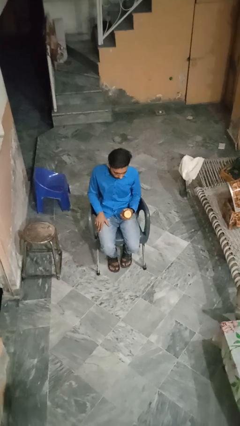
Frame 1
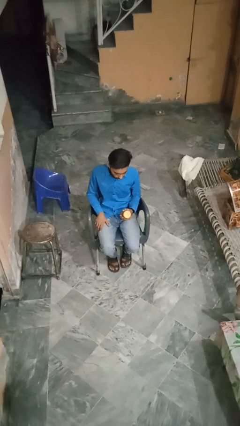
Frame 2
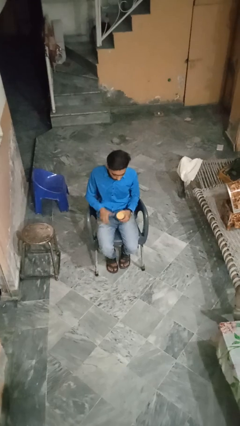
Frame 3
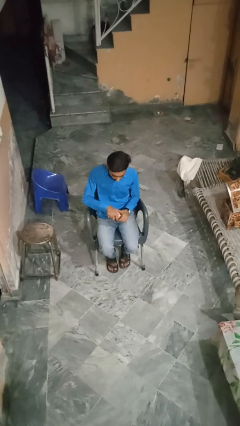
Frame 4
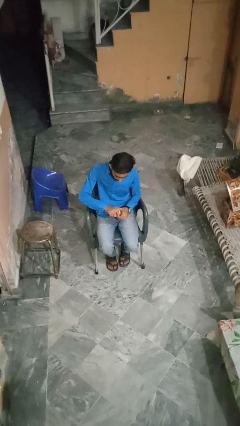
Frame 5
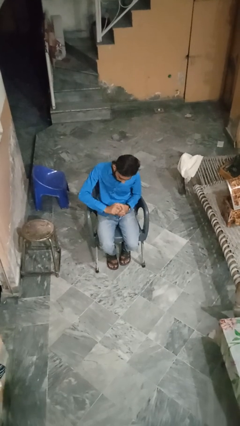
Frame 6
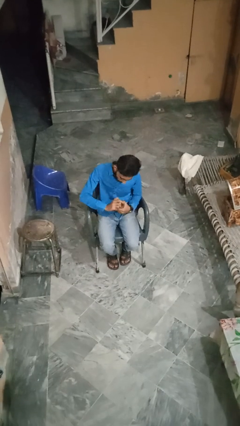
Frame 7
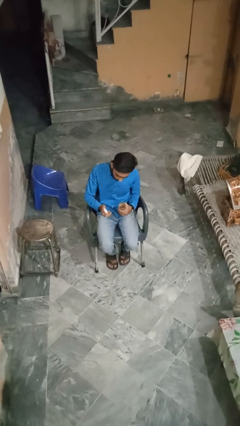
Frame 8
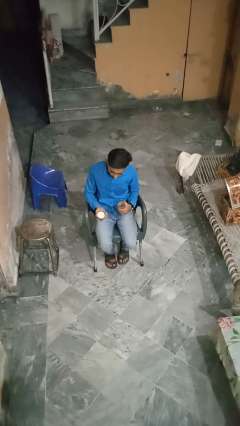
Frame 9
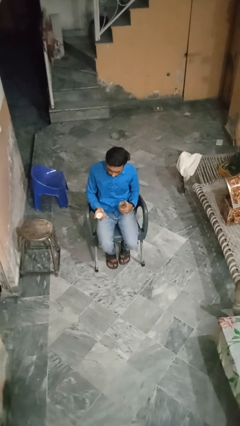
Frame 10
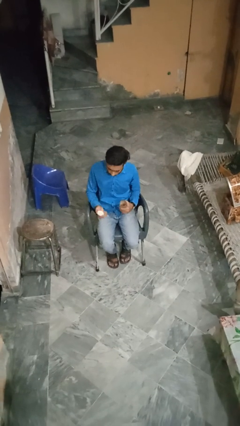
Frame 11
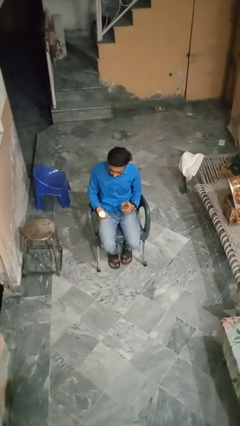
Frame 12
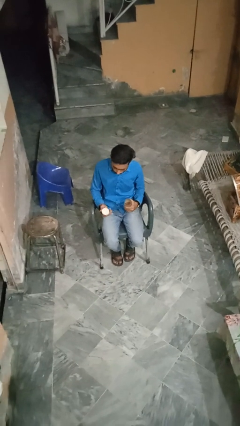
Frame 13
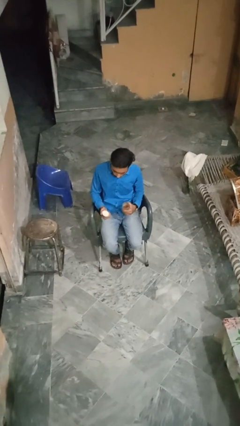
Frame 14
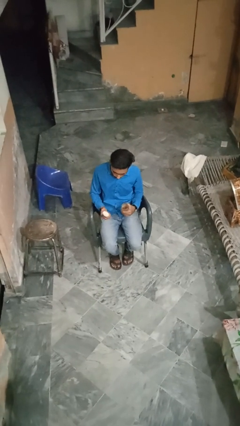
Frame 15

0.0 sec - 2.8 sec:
person opens jar

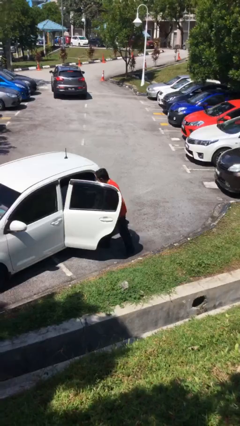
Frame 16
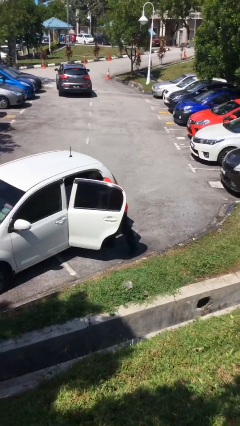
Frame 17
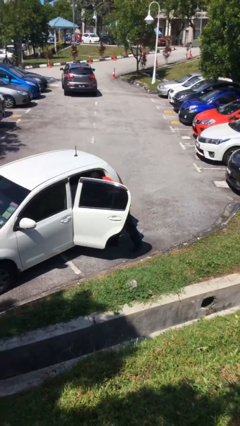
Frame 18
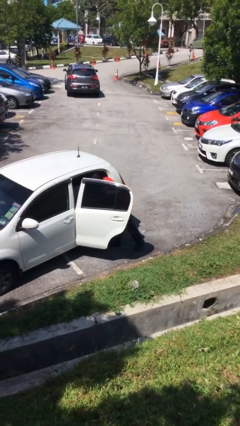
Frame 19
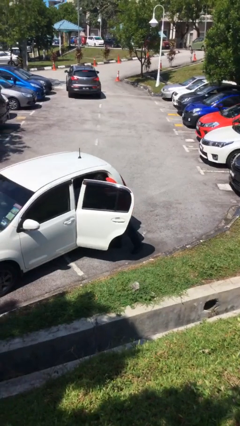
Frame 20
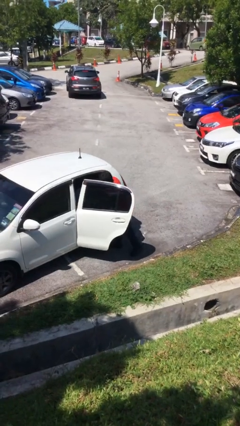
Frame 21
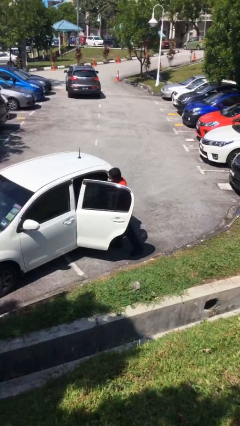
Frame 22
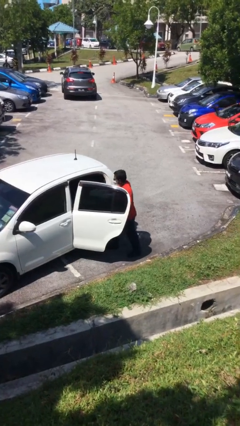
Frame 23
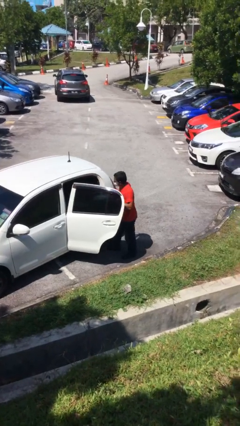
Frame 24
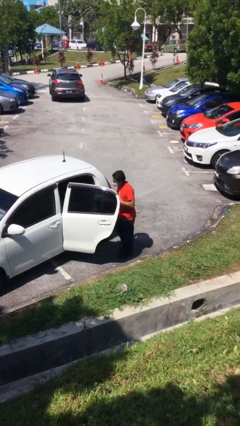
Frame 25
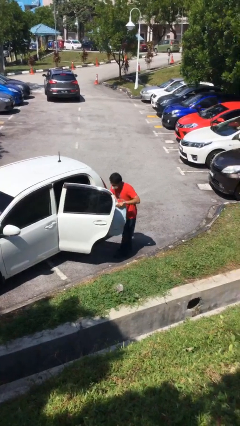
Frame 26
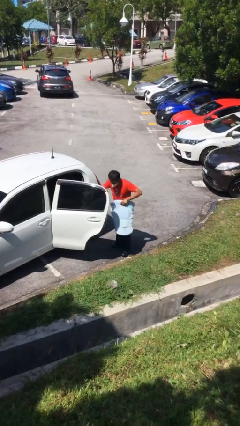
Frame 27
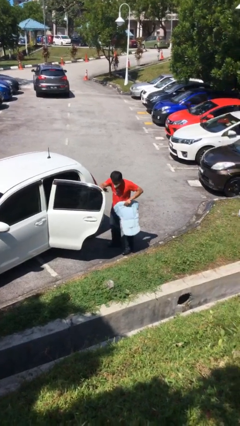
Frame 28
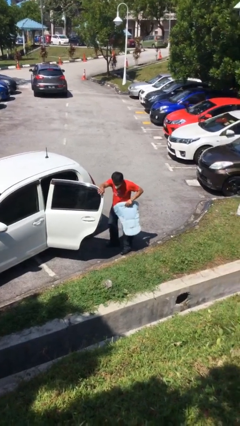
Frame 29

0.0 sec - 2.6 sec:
person unloads car

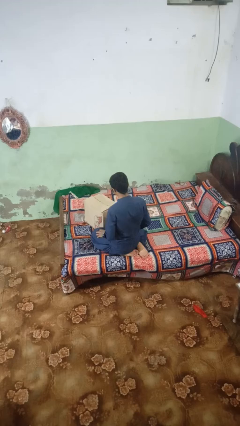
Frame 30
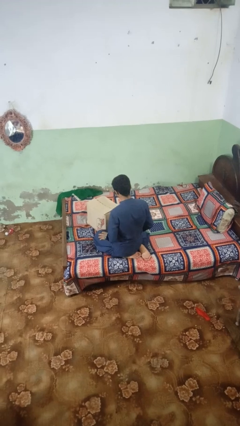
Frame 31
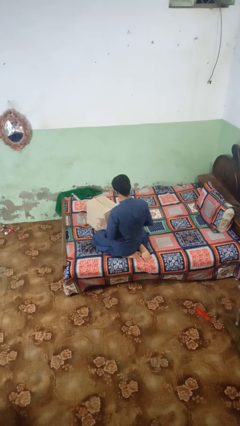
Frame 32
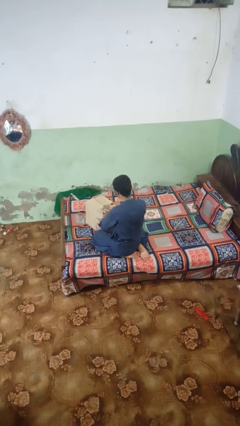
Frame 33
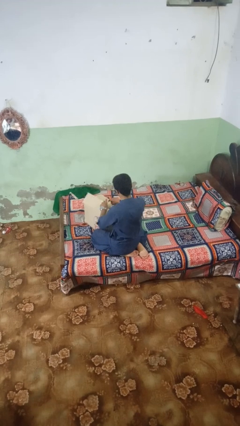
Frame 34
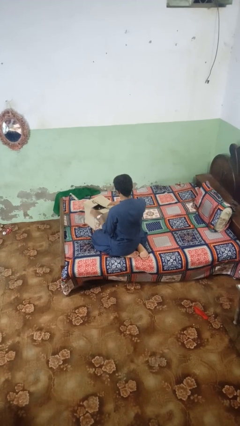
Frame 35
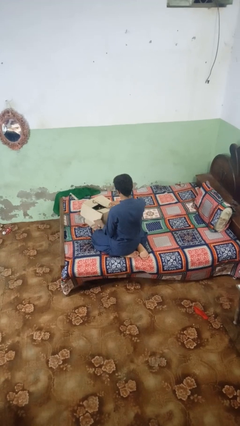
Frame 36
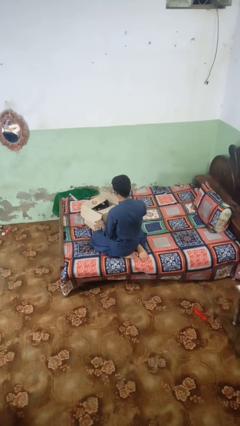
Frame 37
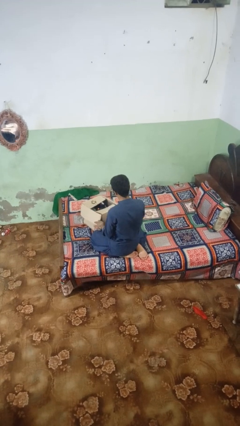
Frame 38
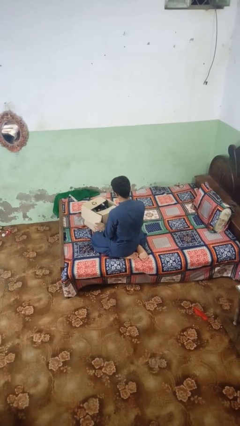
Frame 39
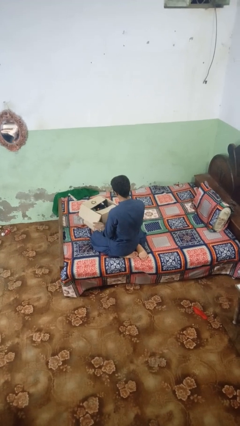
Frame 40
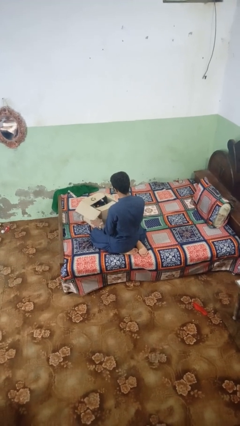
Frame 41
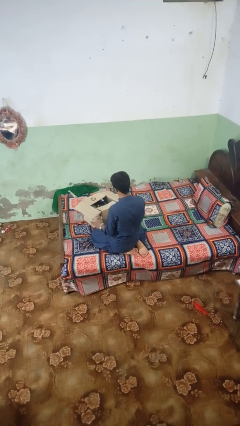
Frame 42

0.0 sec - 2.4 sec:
person opens box

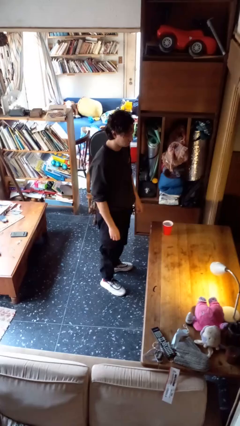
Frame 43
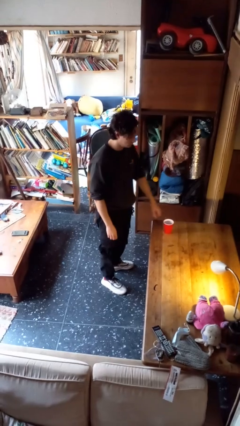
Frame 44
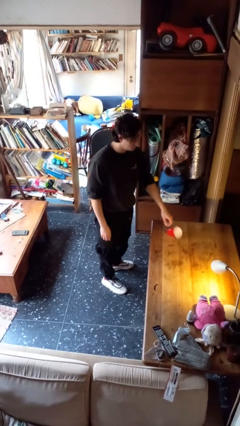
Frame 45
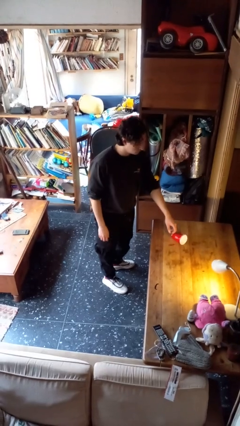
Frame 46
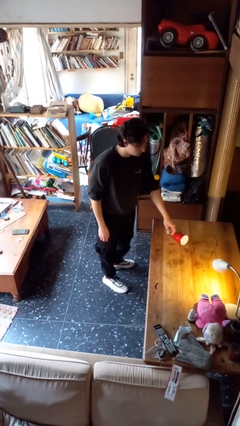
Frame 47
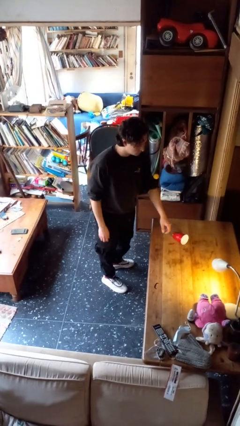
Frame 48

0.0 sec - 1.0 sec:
person knocks over glass

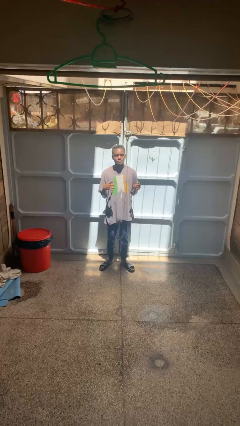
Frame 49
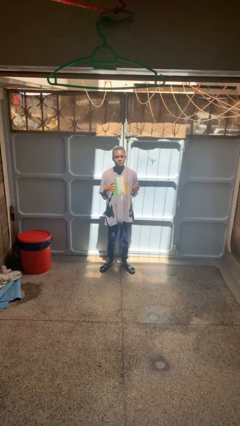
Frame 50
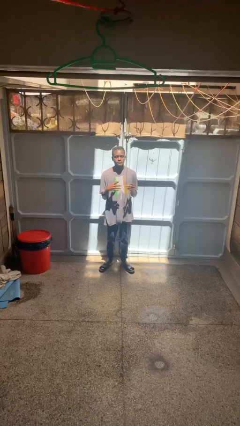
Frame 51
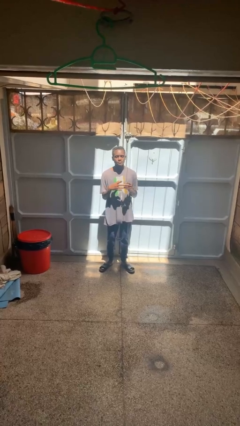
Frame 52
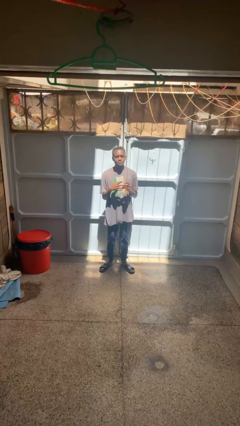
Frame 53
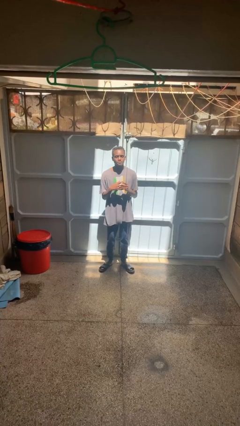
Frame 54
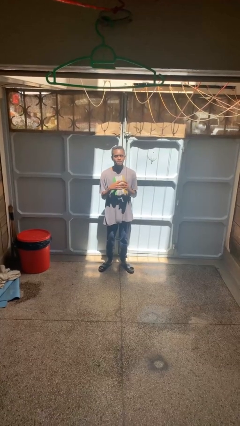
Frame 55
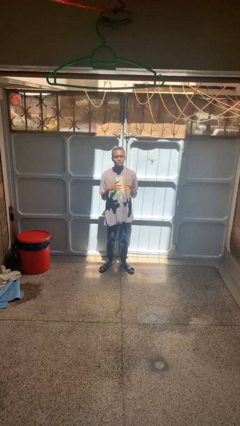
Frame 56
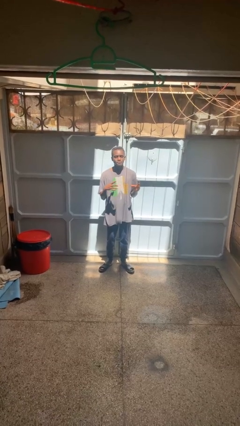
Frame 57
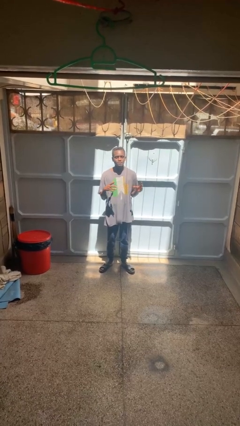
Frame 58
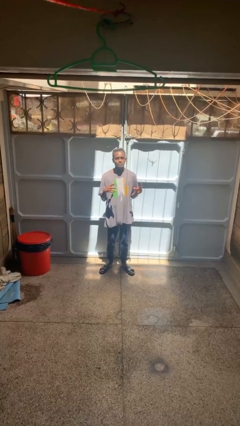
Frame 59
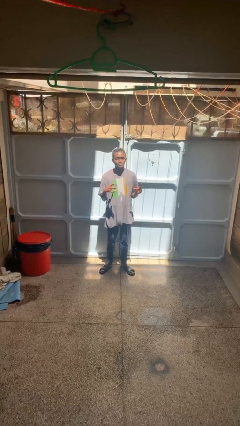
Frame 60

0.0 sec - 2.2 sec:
person puts on ring

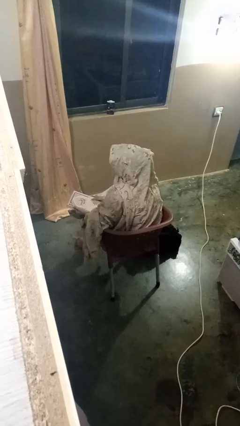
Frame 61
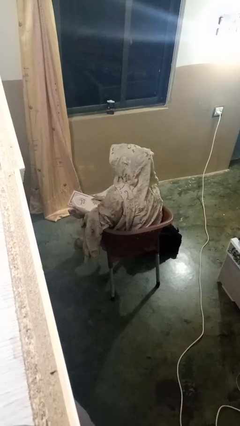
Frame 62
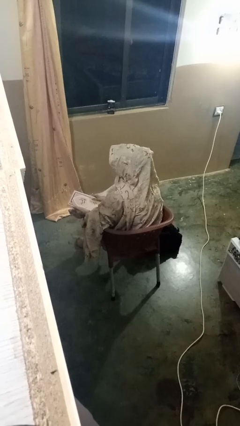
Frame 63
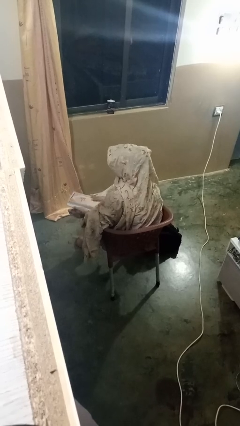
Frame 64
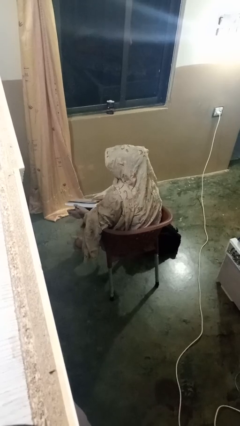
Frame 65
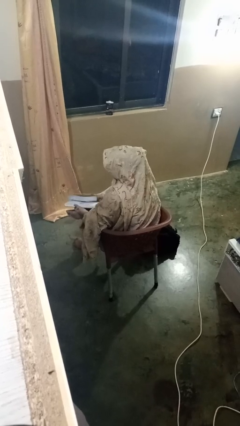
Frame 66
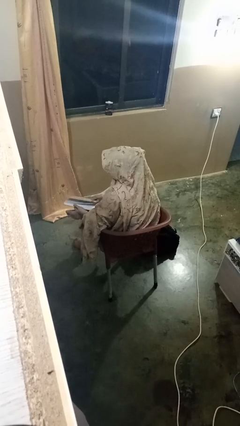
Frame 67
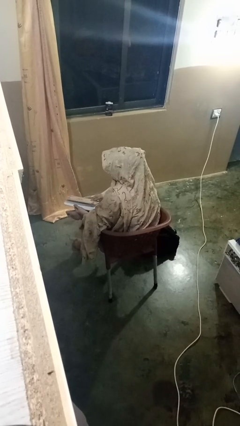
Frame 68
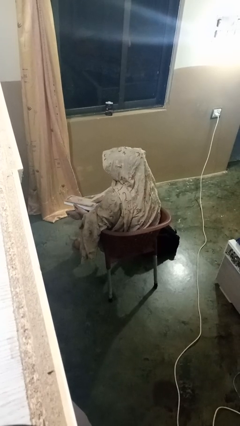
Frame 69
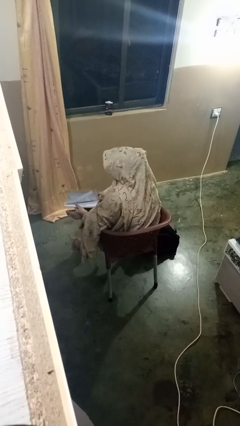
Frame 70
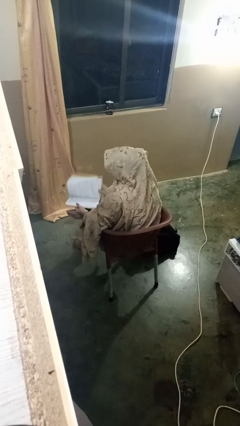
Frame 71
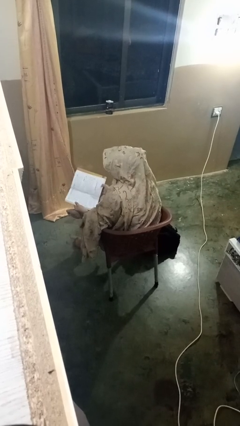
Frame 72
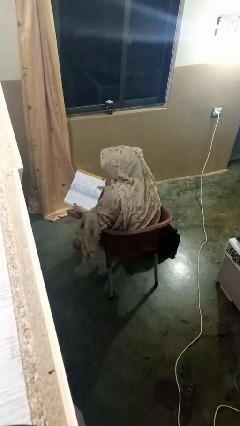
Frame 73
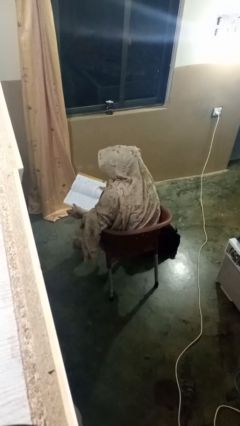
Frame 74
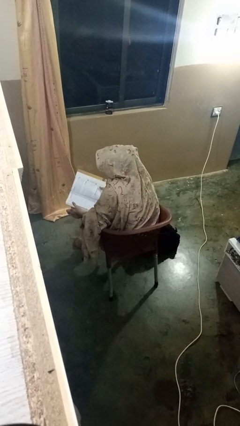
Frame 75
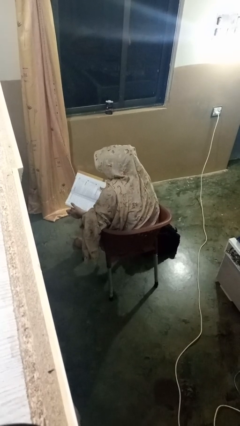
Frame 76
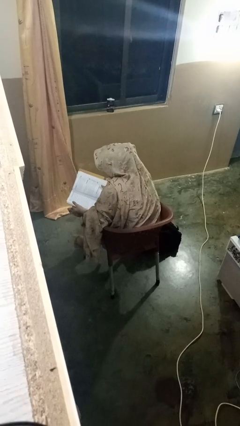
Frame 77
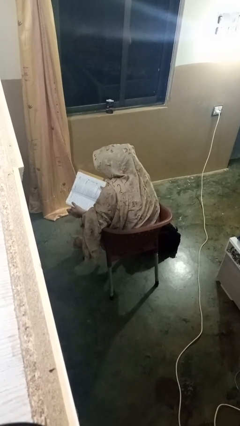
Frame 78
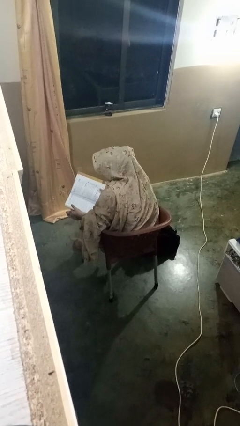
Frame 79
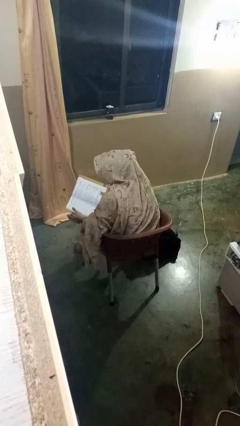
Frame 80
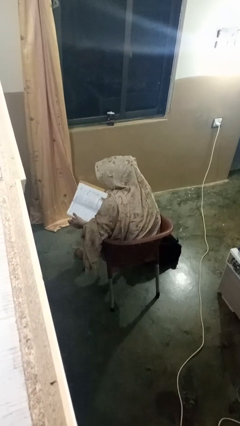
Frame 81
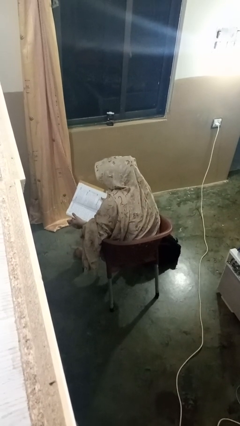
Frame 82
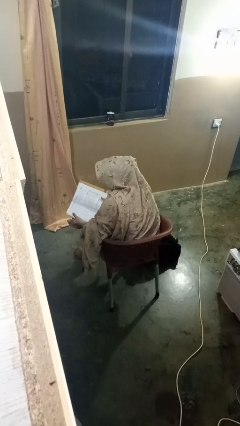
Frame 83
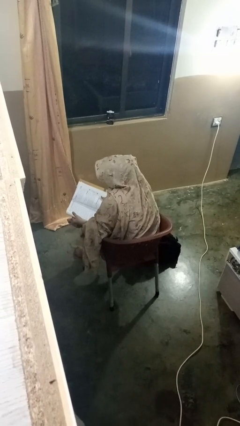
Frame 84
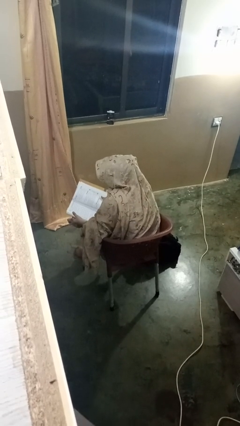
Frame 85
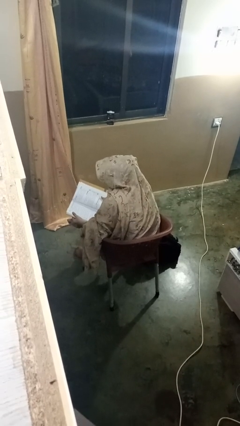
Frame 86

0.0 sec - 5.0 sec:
person reads book

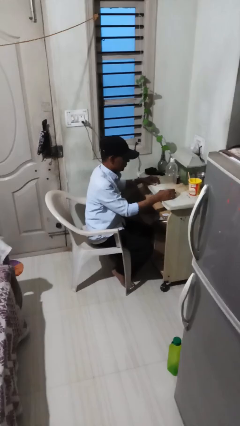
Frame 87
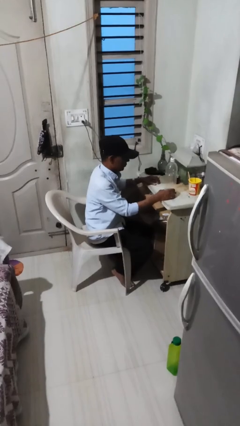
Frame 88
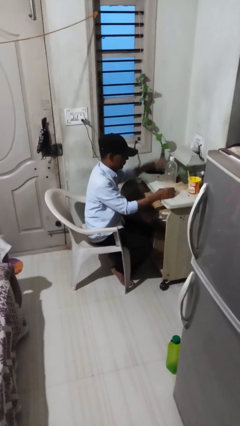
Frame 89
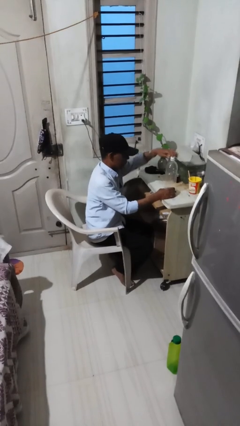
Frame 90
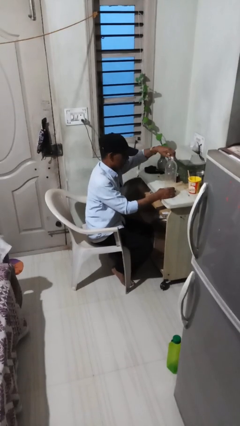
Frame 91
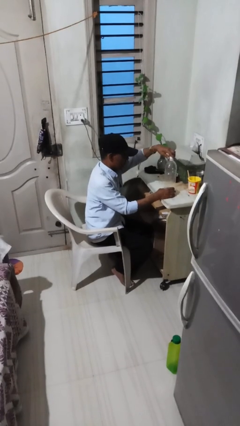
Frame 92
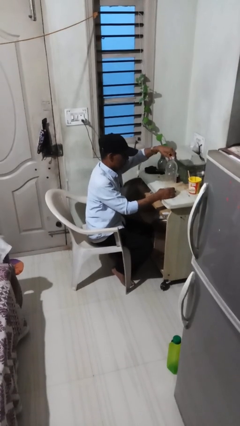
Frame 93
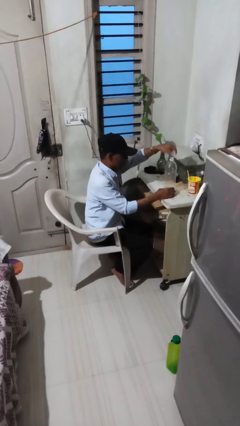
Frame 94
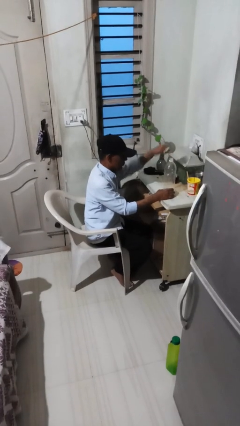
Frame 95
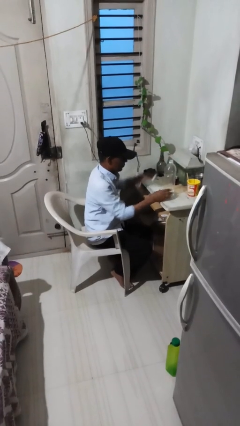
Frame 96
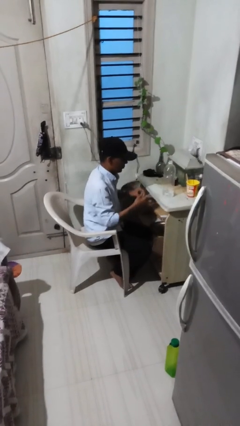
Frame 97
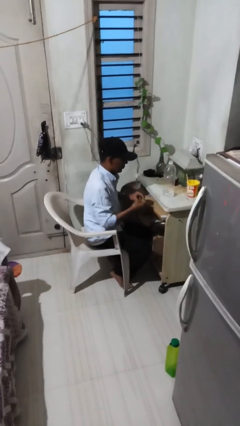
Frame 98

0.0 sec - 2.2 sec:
person unscrews lid from bottle
